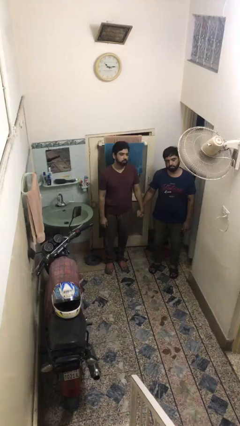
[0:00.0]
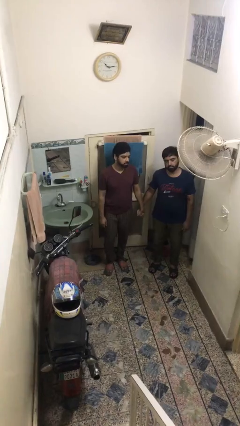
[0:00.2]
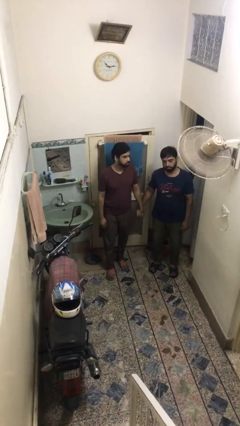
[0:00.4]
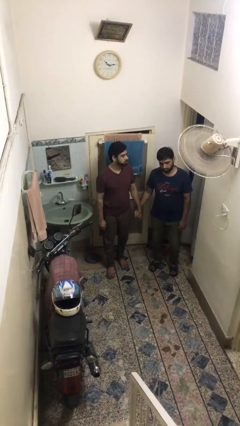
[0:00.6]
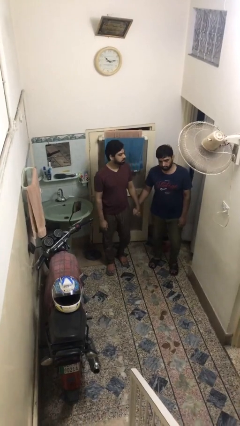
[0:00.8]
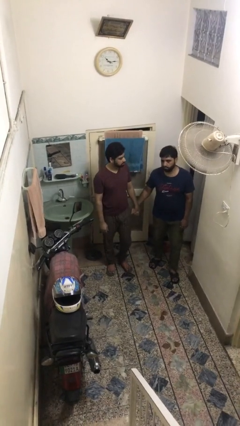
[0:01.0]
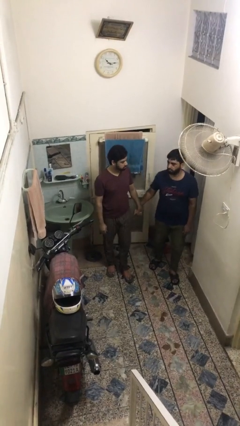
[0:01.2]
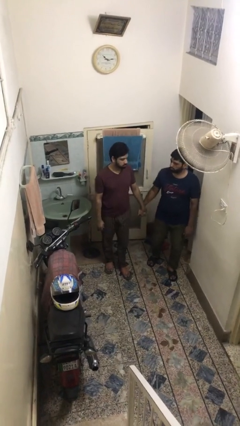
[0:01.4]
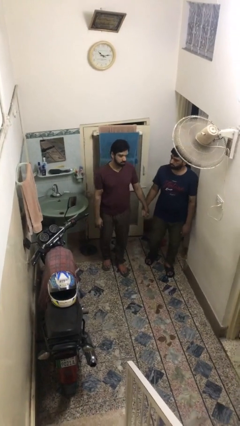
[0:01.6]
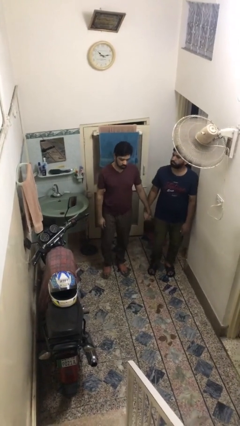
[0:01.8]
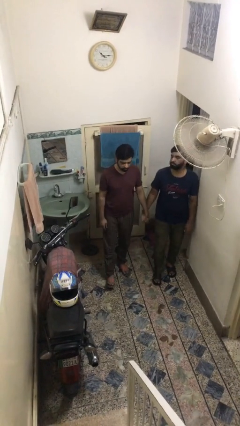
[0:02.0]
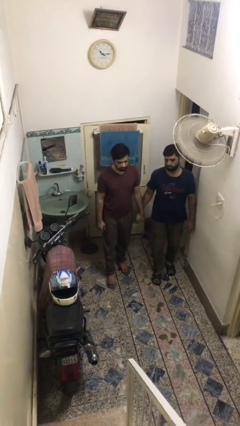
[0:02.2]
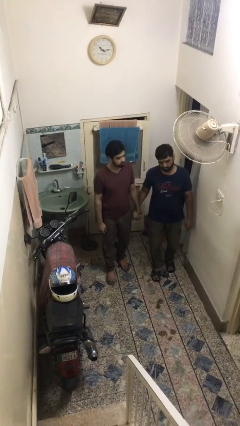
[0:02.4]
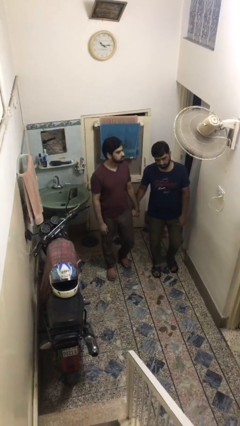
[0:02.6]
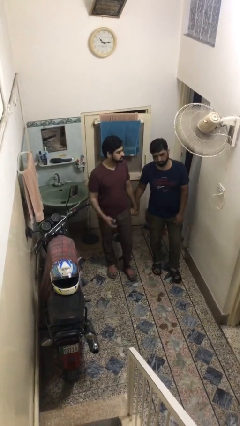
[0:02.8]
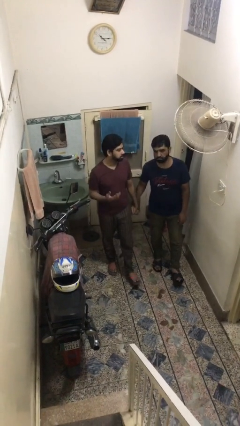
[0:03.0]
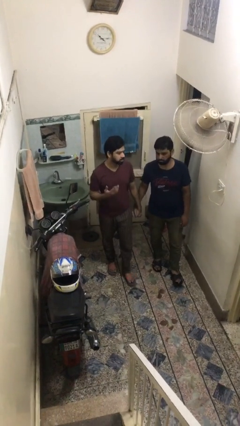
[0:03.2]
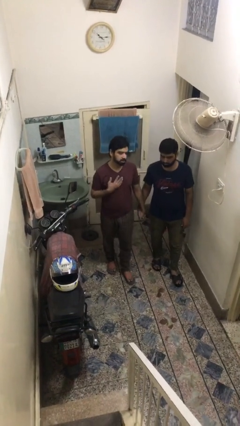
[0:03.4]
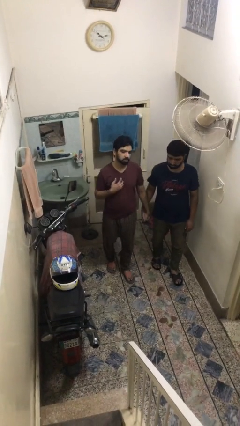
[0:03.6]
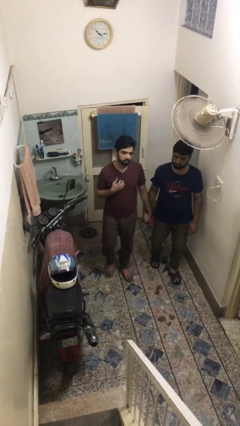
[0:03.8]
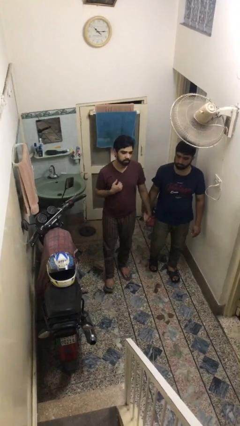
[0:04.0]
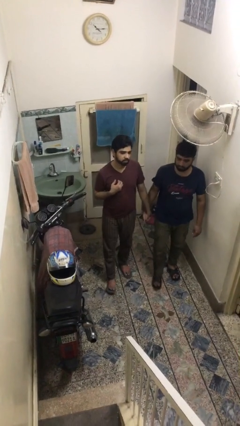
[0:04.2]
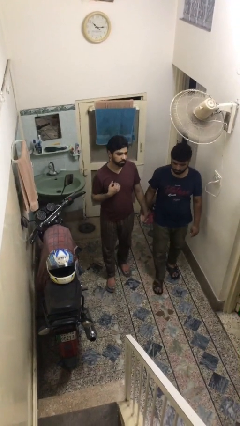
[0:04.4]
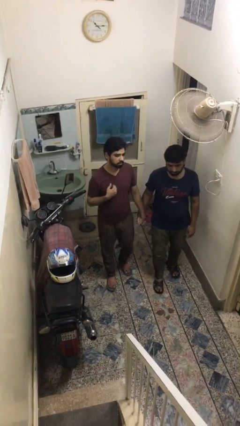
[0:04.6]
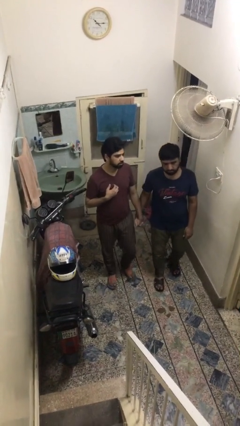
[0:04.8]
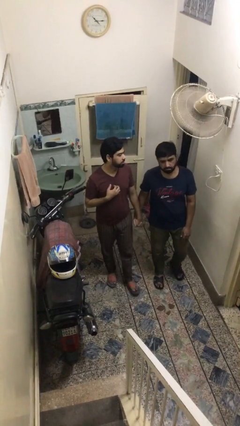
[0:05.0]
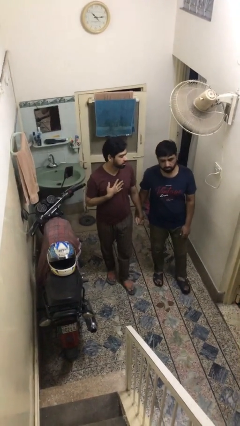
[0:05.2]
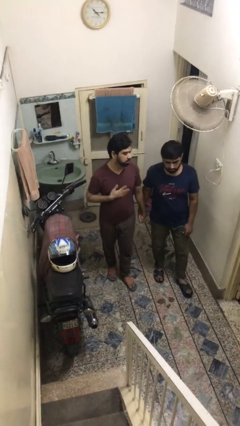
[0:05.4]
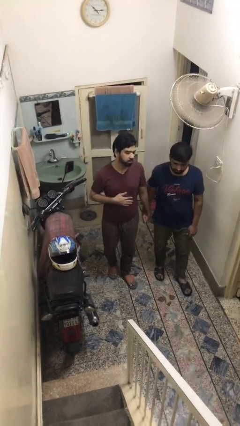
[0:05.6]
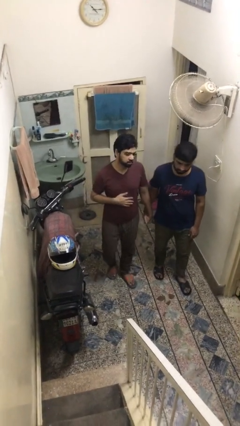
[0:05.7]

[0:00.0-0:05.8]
person holds hand

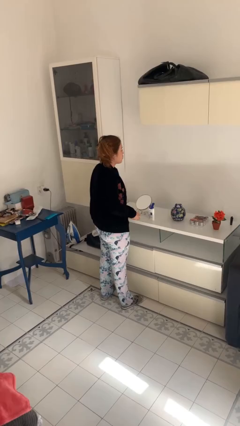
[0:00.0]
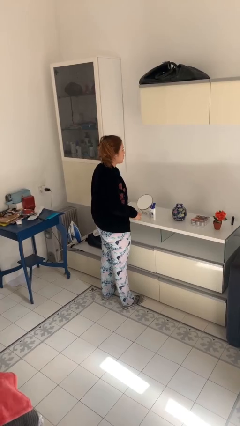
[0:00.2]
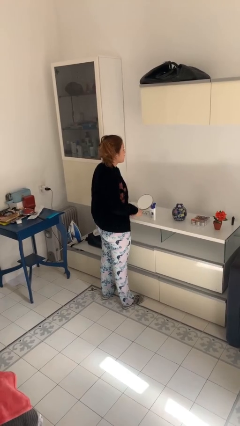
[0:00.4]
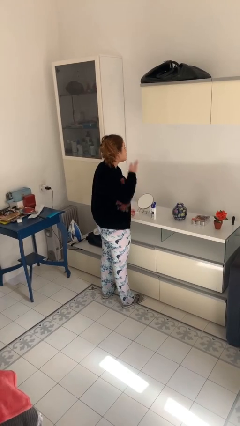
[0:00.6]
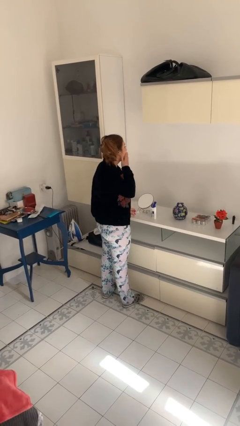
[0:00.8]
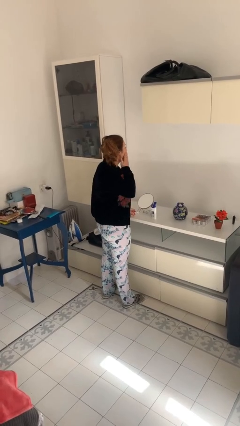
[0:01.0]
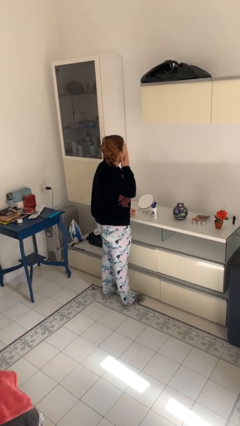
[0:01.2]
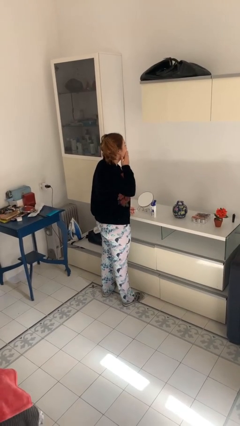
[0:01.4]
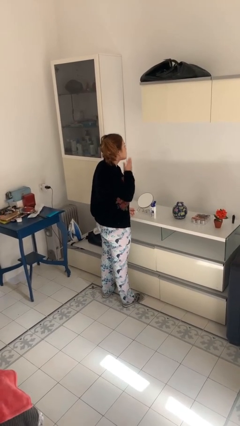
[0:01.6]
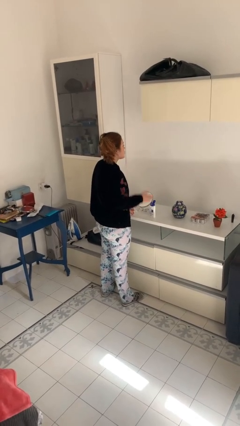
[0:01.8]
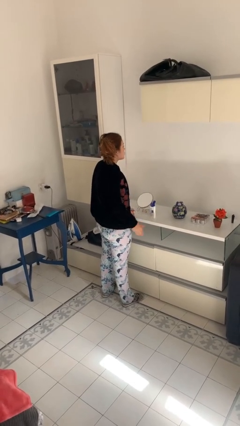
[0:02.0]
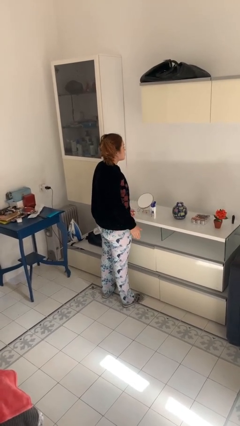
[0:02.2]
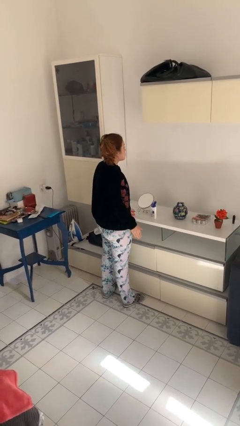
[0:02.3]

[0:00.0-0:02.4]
person applies shaving cream

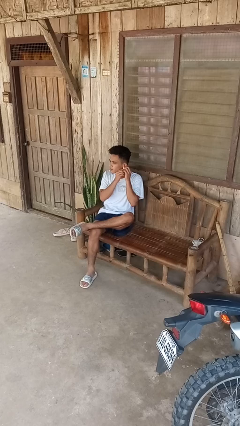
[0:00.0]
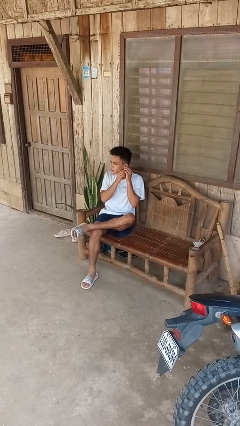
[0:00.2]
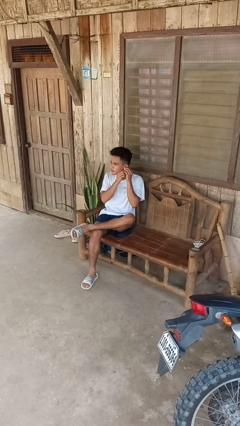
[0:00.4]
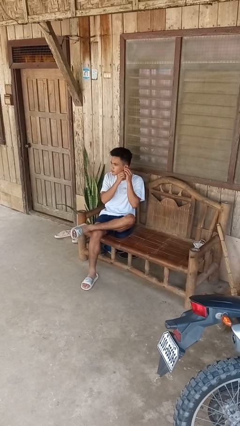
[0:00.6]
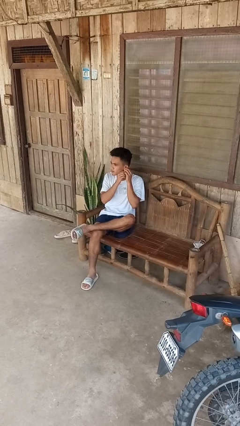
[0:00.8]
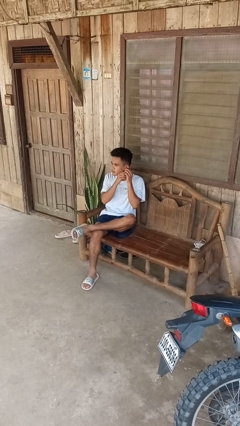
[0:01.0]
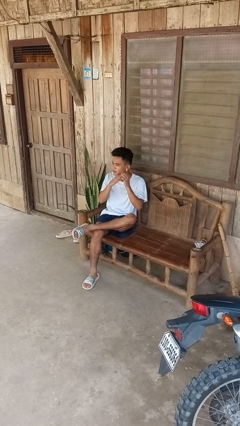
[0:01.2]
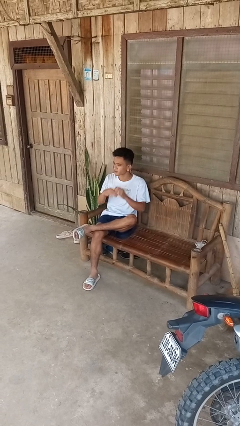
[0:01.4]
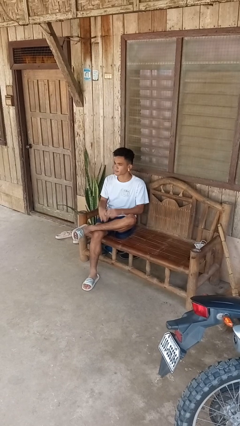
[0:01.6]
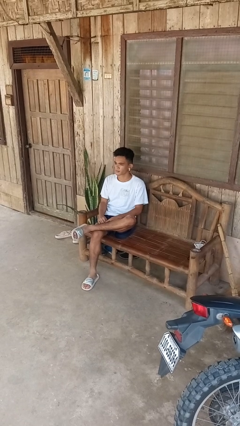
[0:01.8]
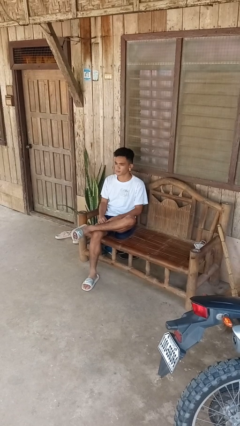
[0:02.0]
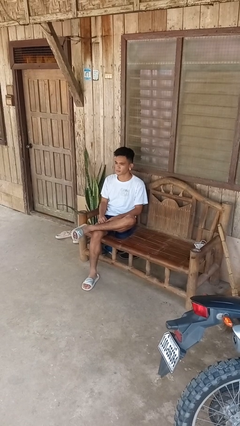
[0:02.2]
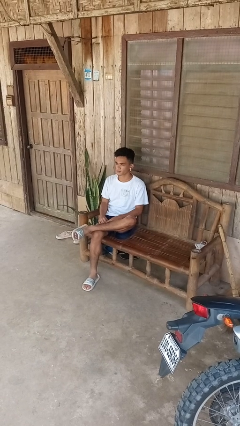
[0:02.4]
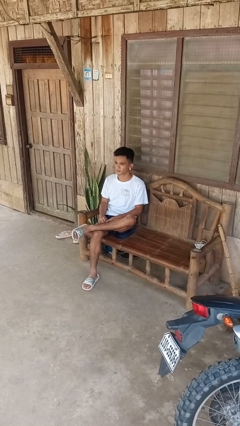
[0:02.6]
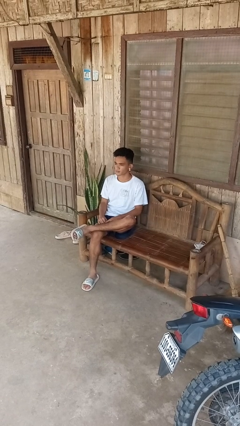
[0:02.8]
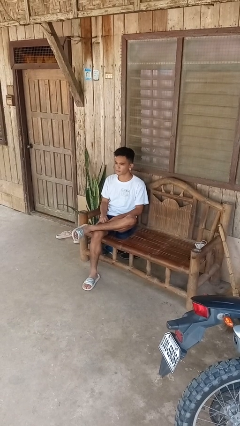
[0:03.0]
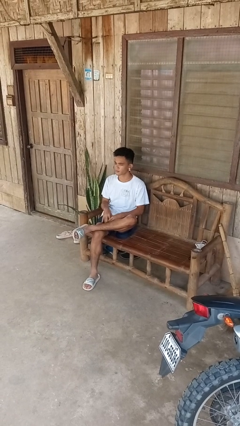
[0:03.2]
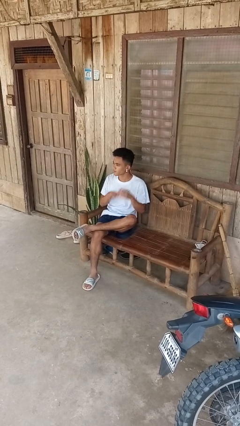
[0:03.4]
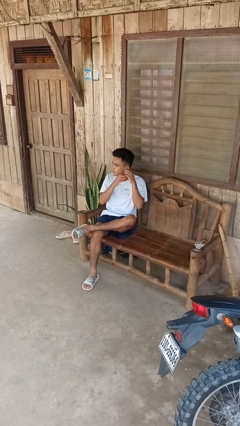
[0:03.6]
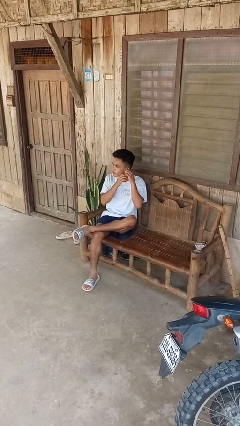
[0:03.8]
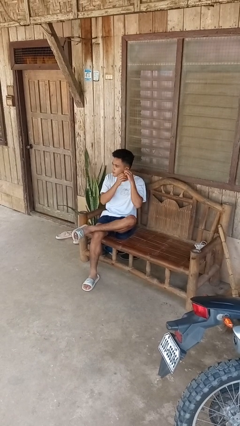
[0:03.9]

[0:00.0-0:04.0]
person puts on earrings

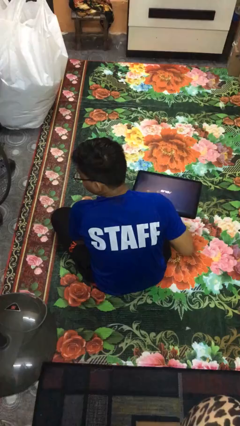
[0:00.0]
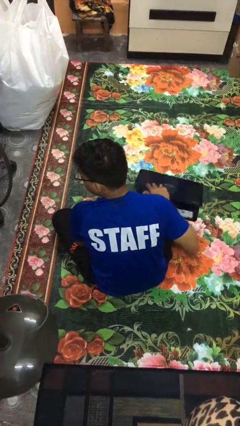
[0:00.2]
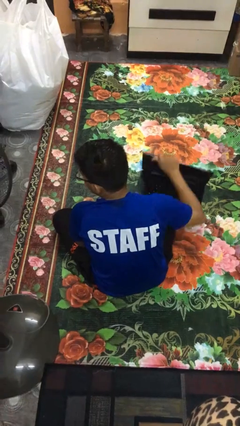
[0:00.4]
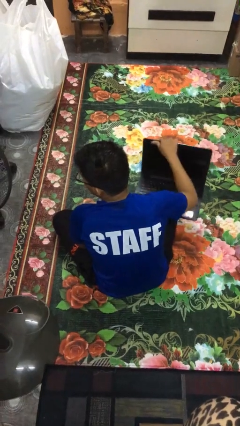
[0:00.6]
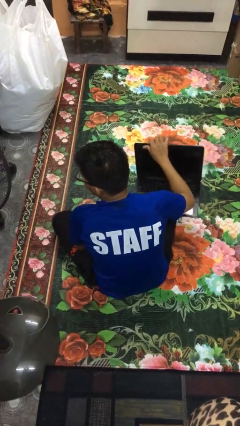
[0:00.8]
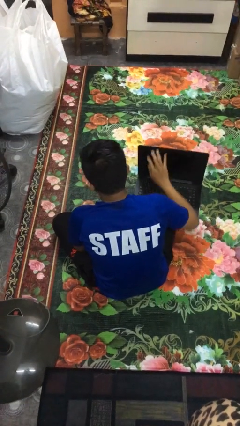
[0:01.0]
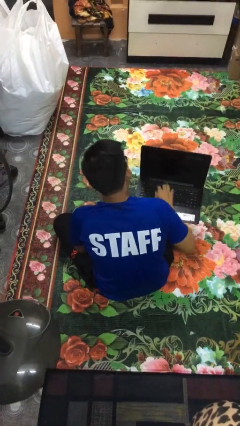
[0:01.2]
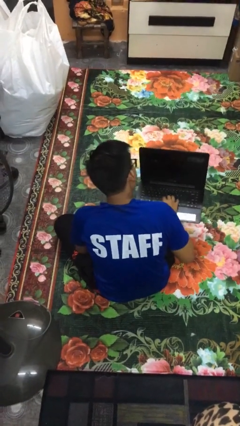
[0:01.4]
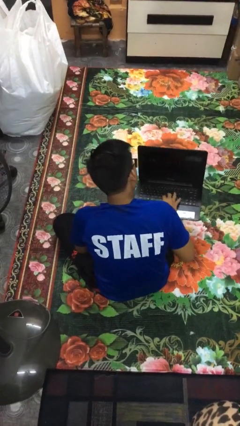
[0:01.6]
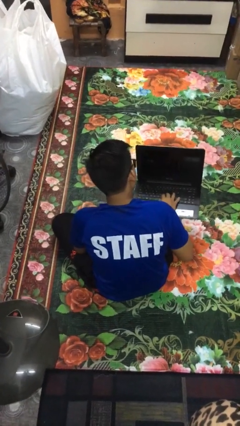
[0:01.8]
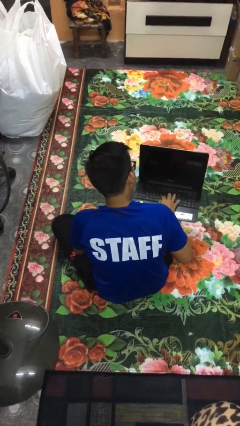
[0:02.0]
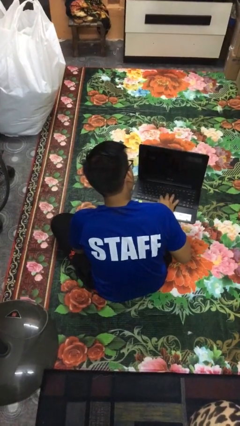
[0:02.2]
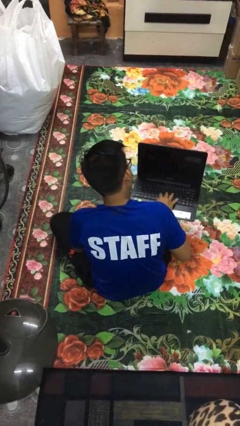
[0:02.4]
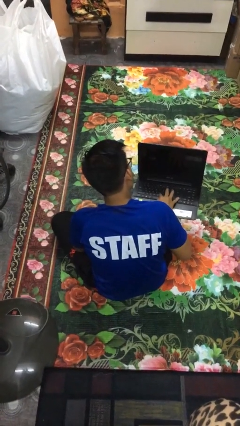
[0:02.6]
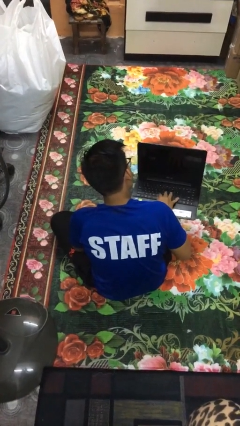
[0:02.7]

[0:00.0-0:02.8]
person opens laptop

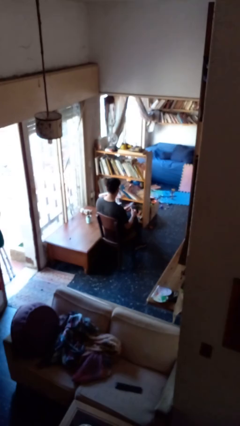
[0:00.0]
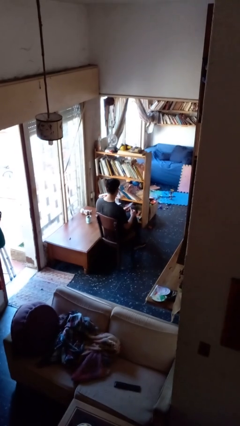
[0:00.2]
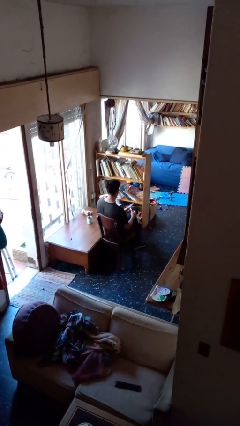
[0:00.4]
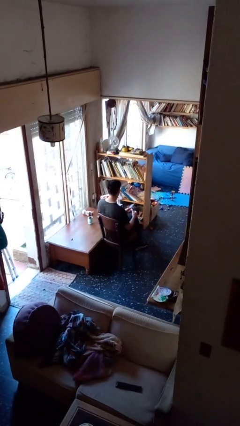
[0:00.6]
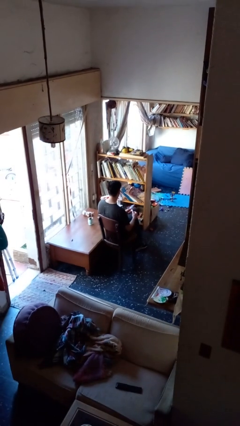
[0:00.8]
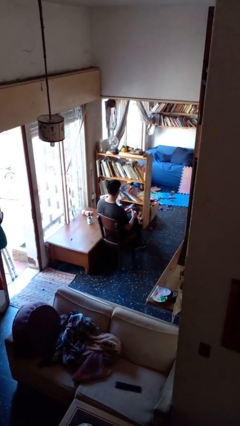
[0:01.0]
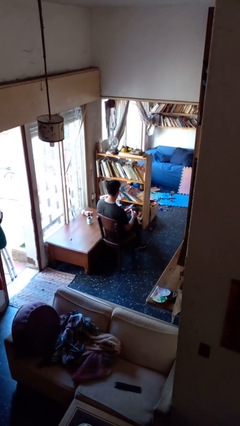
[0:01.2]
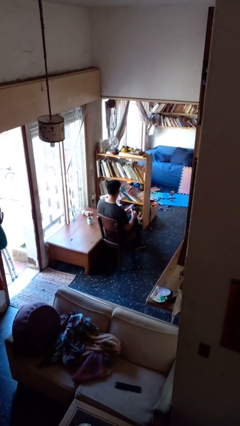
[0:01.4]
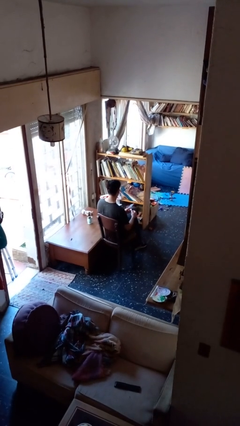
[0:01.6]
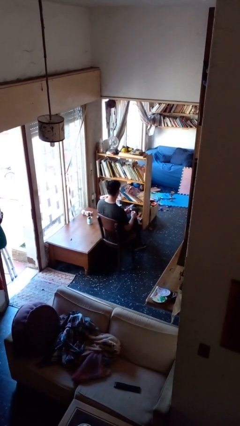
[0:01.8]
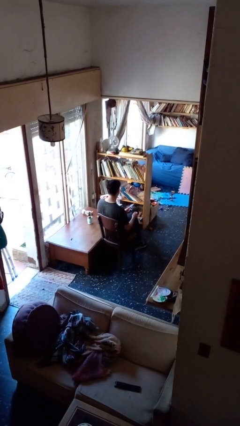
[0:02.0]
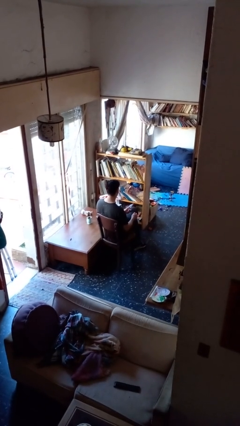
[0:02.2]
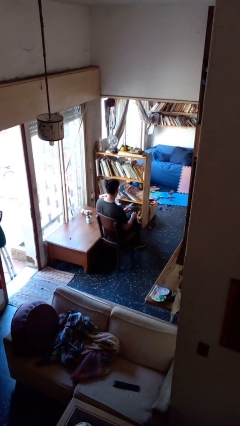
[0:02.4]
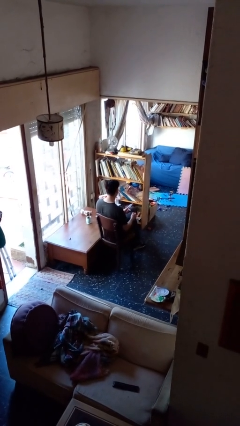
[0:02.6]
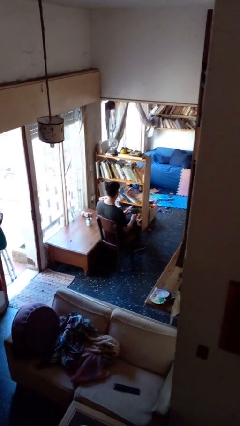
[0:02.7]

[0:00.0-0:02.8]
person clips fingernails
